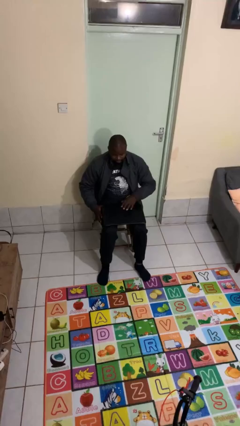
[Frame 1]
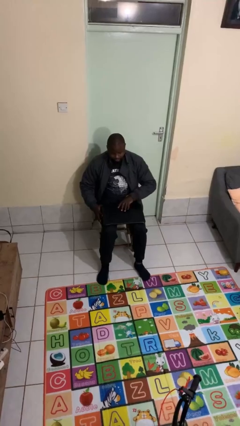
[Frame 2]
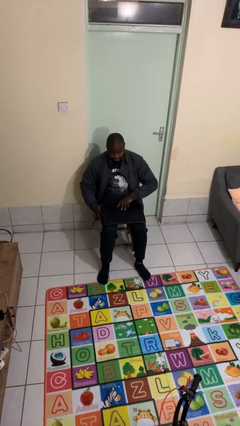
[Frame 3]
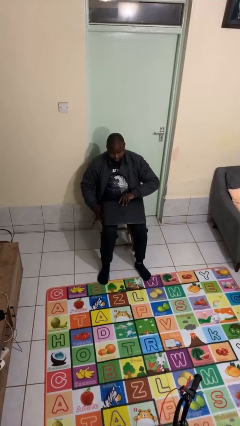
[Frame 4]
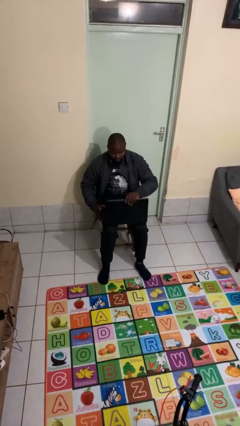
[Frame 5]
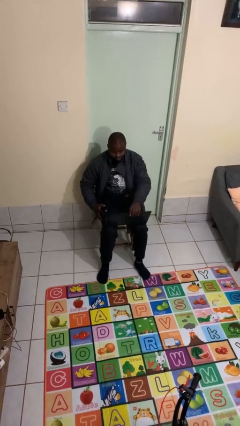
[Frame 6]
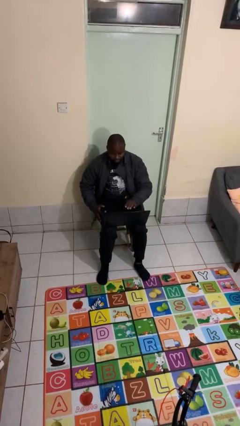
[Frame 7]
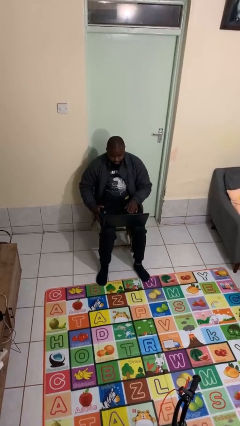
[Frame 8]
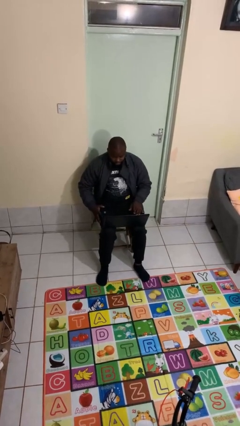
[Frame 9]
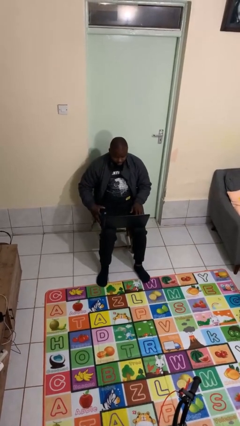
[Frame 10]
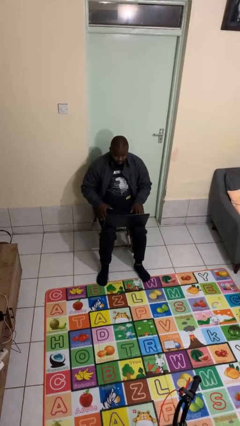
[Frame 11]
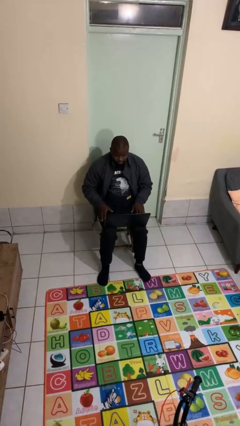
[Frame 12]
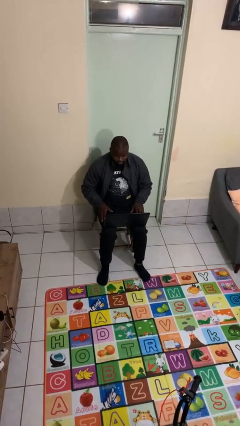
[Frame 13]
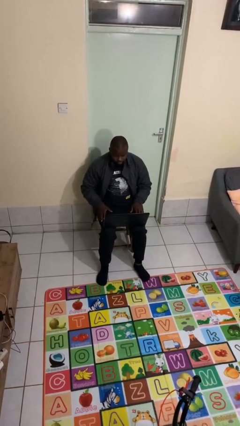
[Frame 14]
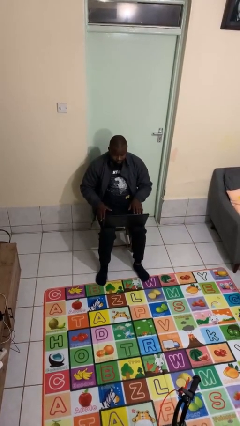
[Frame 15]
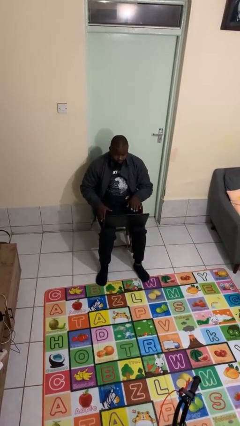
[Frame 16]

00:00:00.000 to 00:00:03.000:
person opens laptop

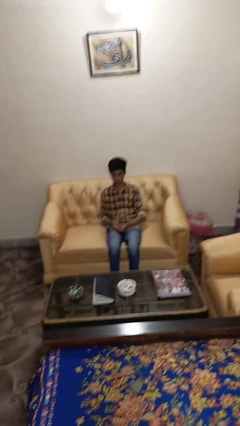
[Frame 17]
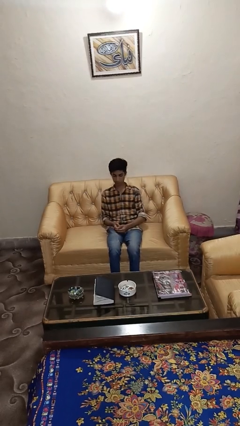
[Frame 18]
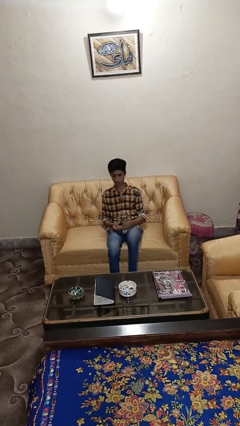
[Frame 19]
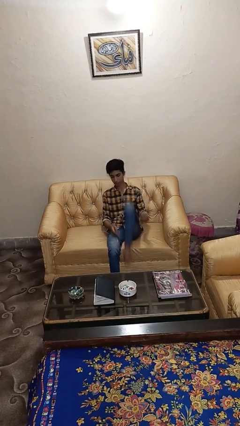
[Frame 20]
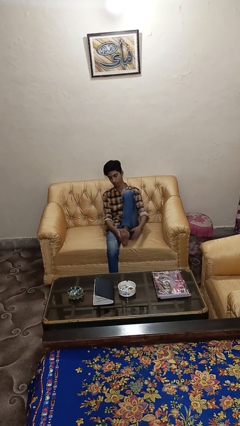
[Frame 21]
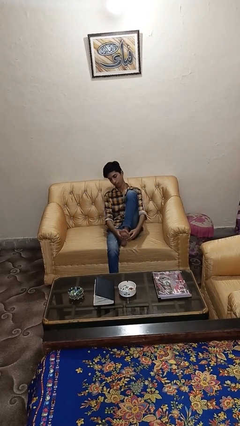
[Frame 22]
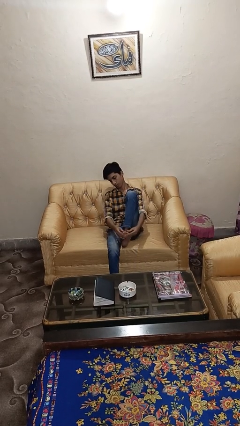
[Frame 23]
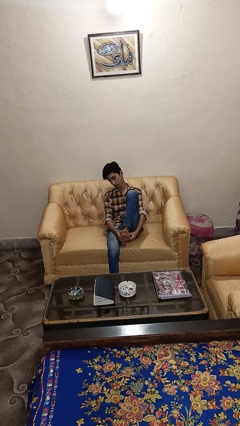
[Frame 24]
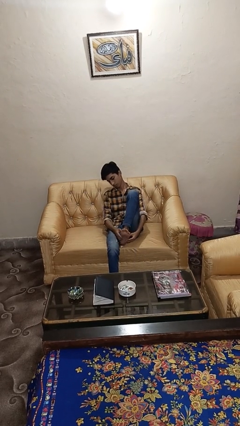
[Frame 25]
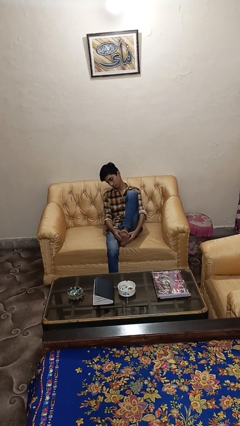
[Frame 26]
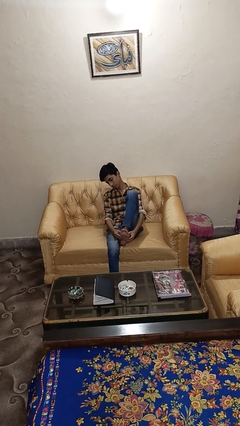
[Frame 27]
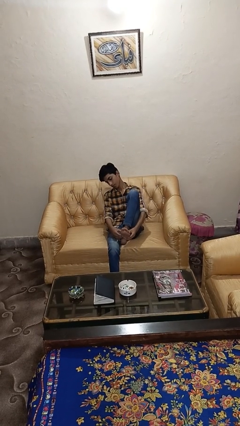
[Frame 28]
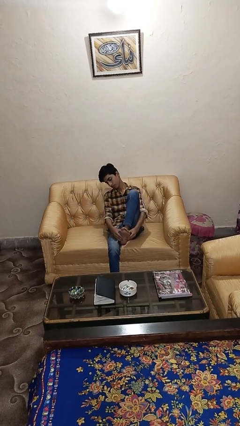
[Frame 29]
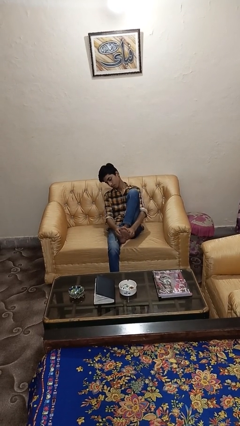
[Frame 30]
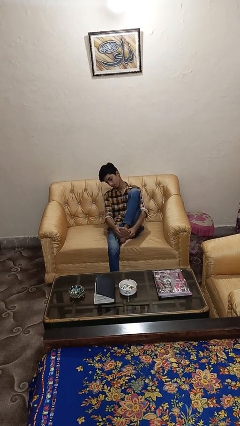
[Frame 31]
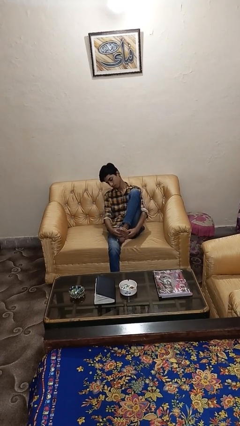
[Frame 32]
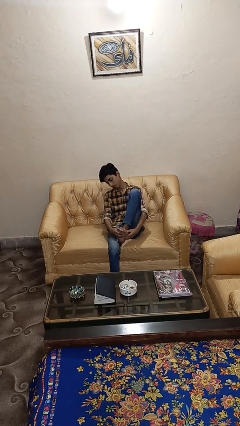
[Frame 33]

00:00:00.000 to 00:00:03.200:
person rubs foot

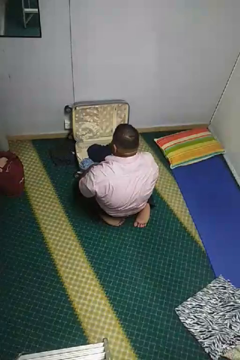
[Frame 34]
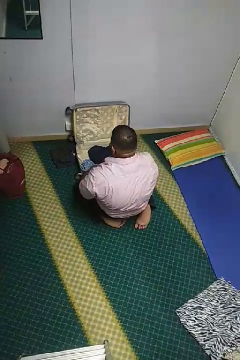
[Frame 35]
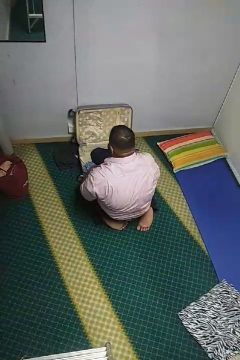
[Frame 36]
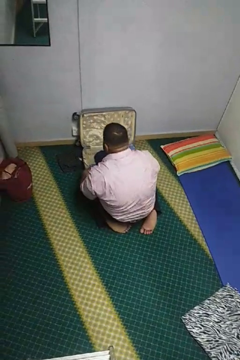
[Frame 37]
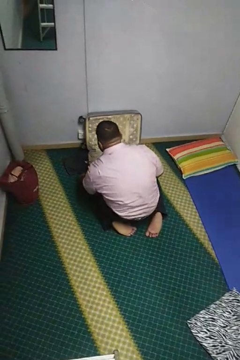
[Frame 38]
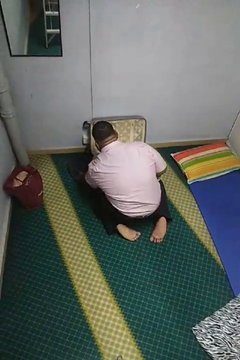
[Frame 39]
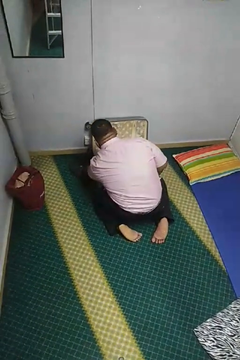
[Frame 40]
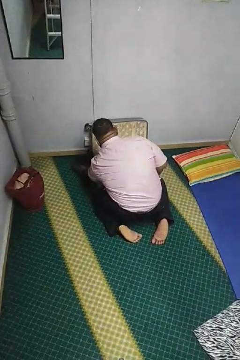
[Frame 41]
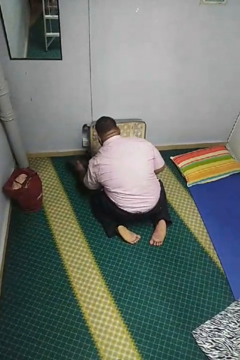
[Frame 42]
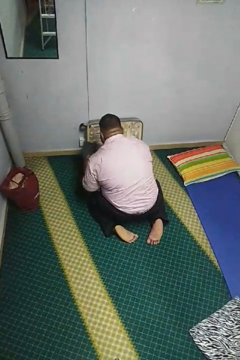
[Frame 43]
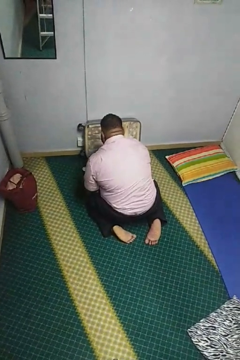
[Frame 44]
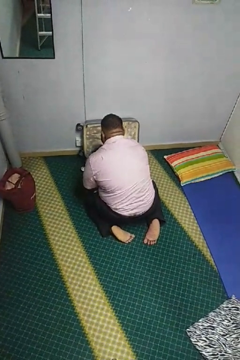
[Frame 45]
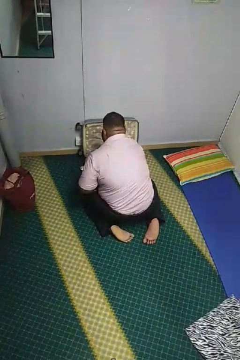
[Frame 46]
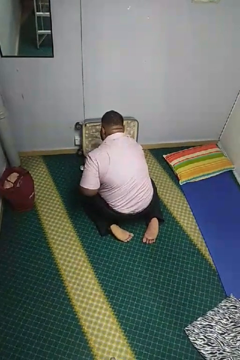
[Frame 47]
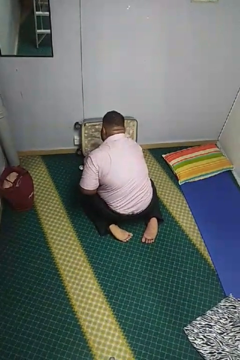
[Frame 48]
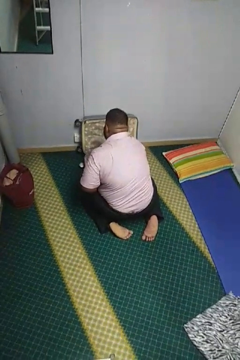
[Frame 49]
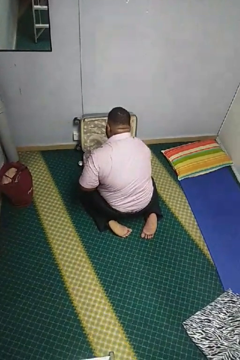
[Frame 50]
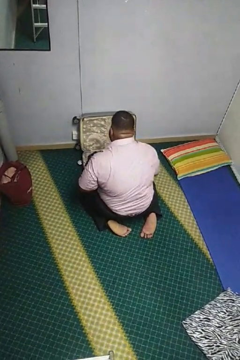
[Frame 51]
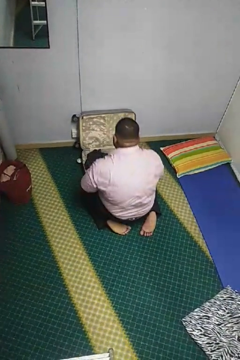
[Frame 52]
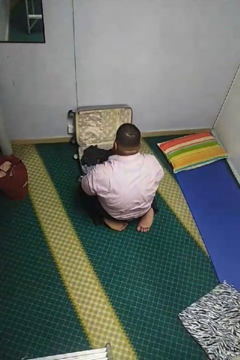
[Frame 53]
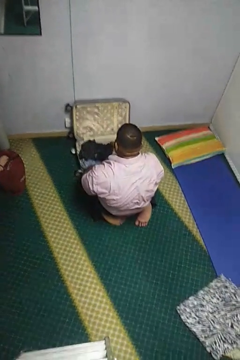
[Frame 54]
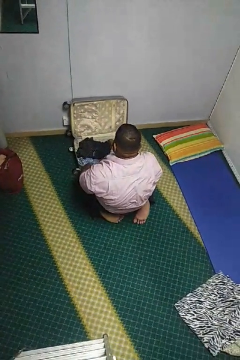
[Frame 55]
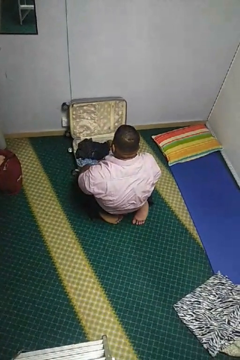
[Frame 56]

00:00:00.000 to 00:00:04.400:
person loads clothes into suitcase

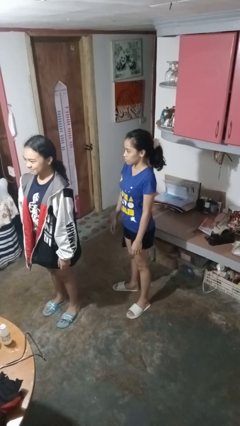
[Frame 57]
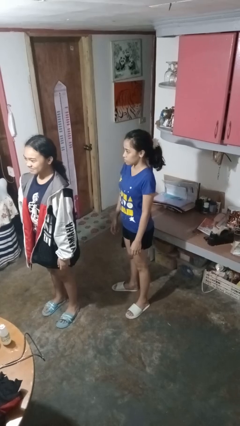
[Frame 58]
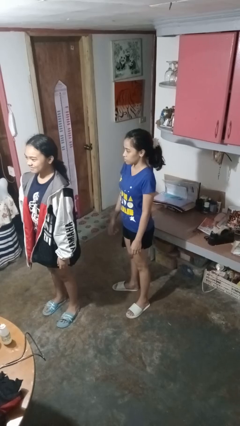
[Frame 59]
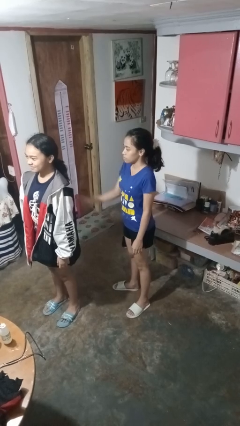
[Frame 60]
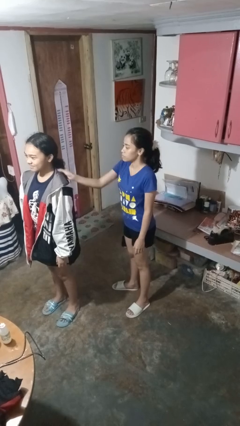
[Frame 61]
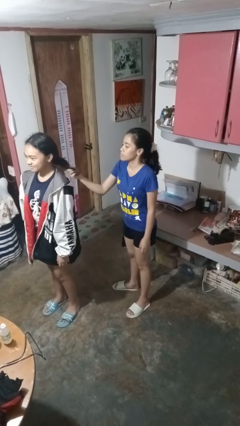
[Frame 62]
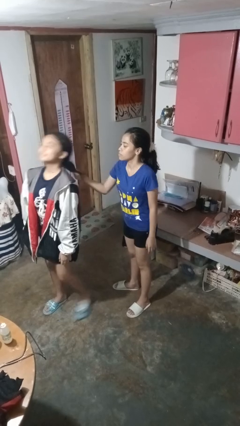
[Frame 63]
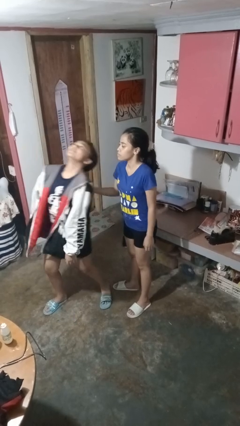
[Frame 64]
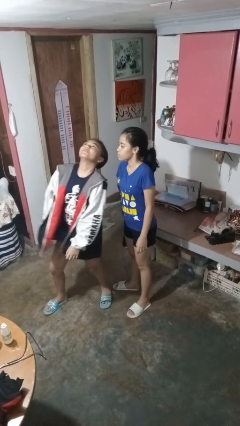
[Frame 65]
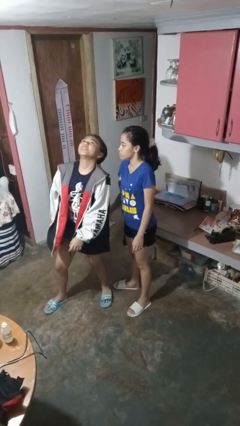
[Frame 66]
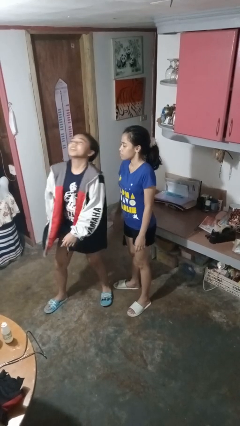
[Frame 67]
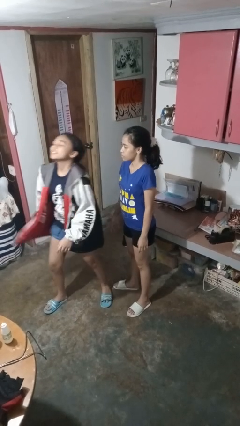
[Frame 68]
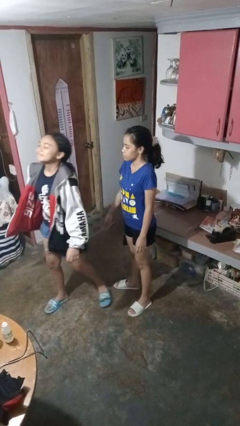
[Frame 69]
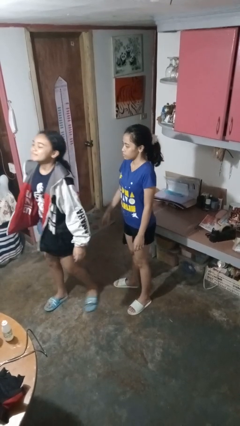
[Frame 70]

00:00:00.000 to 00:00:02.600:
person grabs person by hair

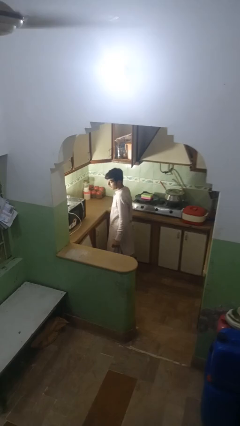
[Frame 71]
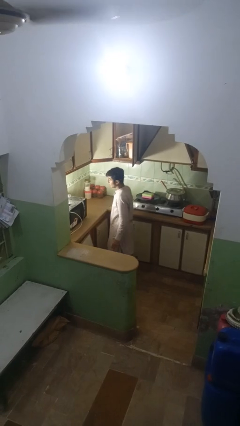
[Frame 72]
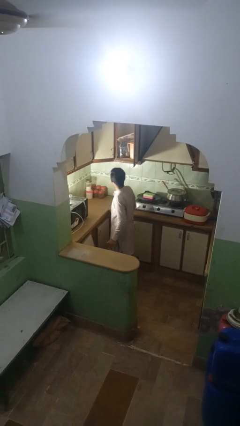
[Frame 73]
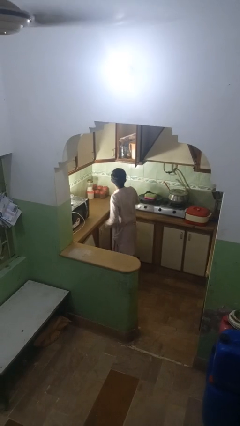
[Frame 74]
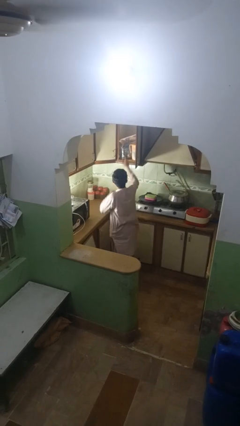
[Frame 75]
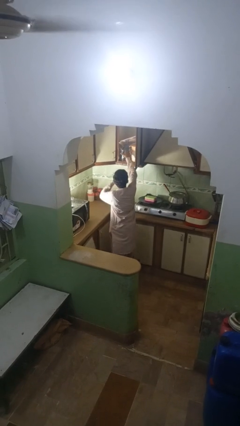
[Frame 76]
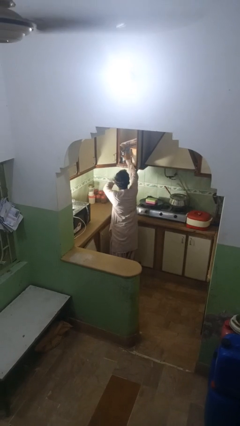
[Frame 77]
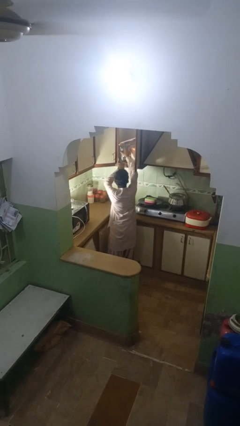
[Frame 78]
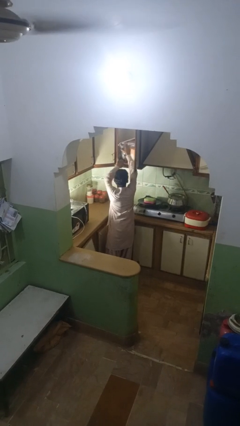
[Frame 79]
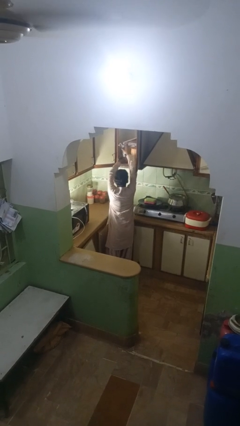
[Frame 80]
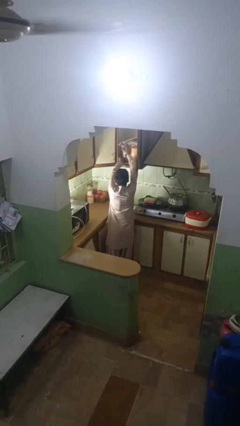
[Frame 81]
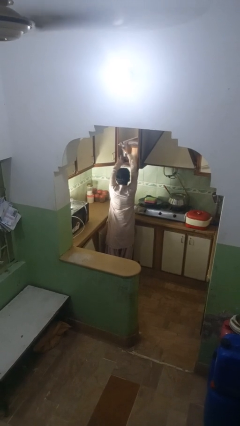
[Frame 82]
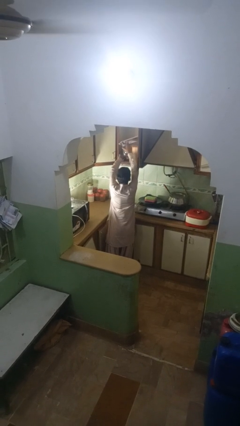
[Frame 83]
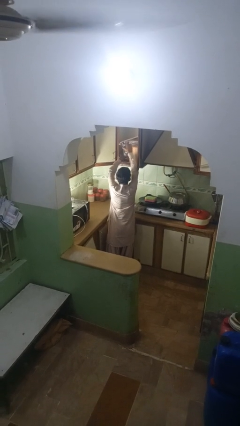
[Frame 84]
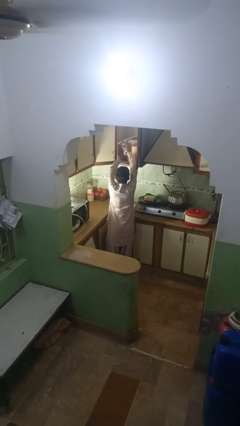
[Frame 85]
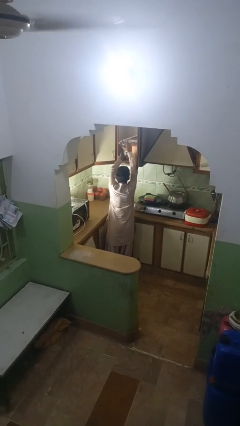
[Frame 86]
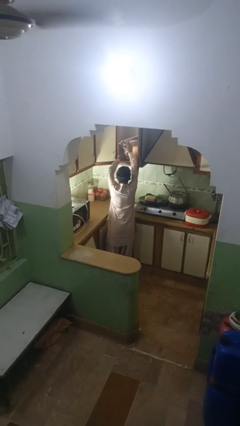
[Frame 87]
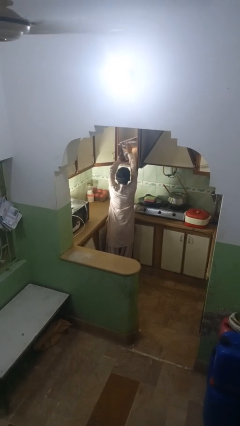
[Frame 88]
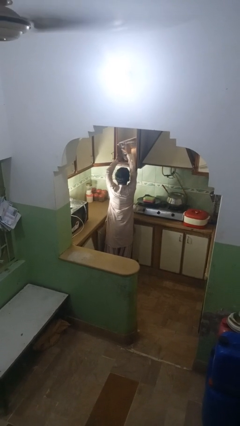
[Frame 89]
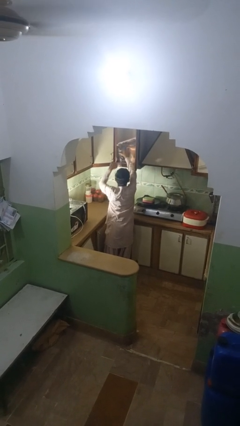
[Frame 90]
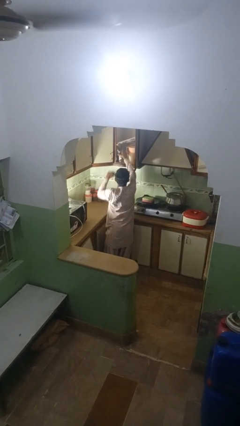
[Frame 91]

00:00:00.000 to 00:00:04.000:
person searches in kitchen drawer

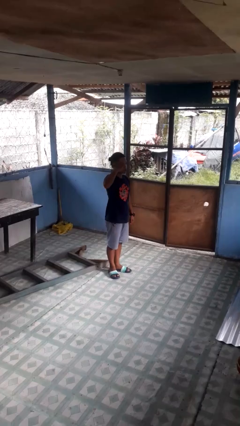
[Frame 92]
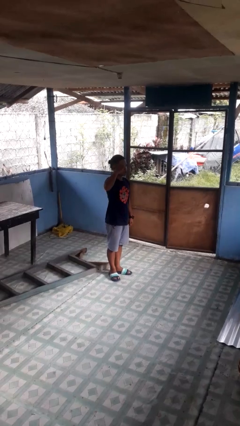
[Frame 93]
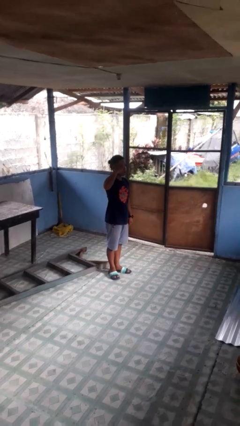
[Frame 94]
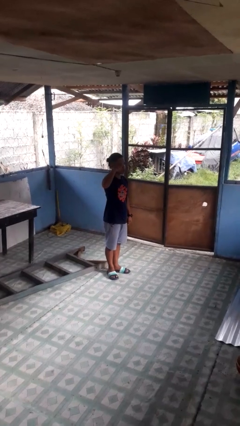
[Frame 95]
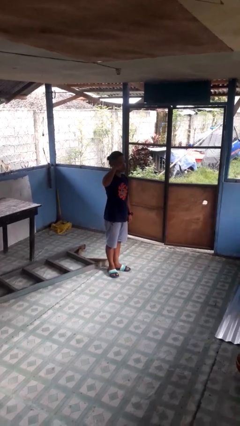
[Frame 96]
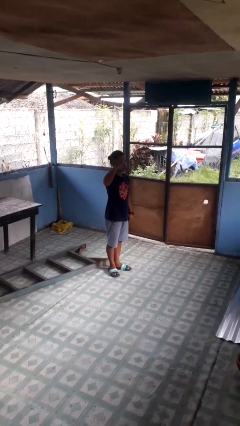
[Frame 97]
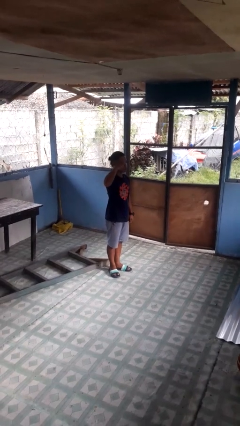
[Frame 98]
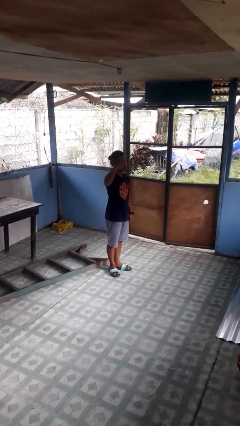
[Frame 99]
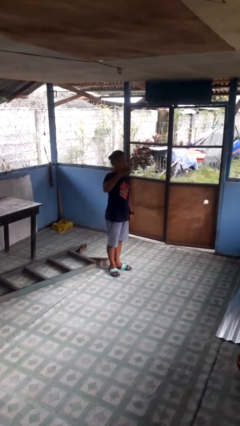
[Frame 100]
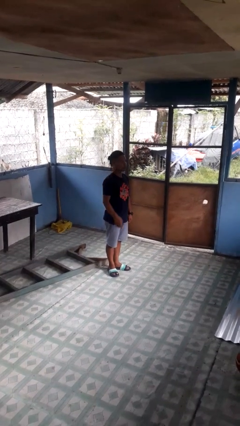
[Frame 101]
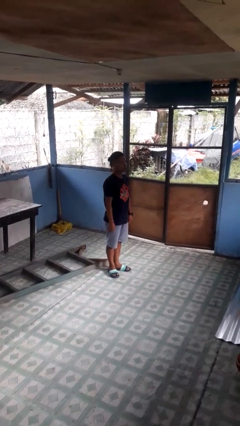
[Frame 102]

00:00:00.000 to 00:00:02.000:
person salutes
